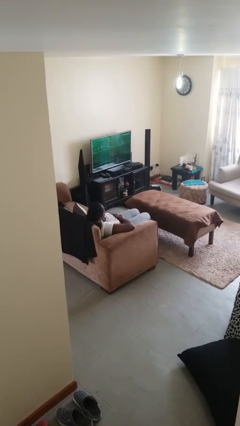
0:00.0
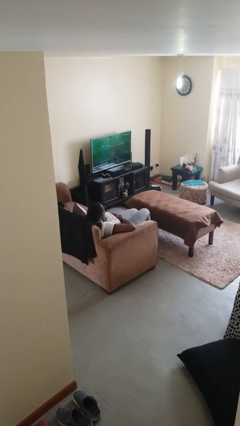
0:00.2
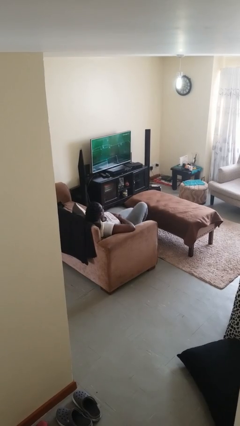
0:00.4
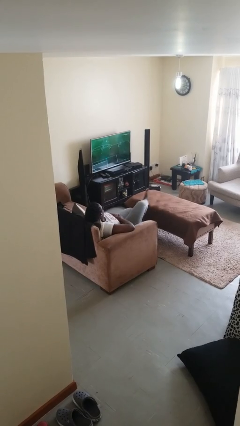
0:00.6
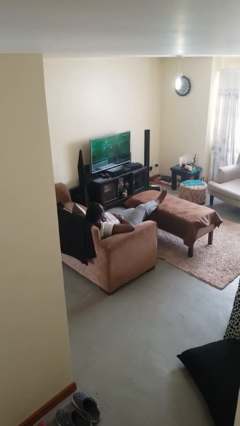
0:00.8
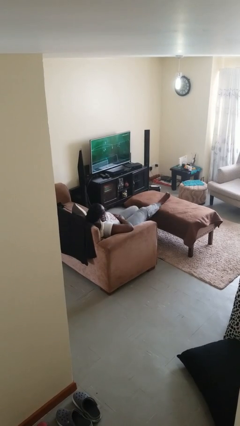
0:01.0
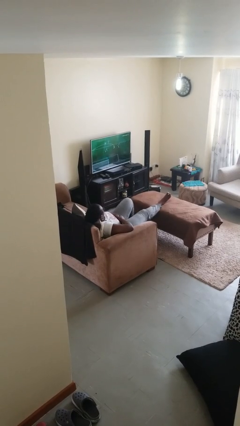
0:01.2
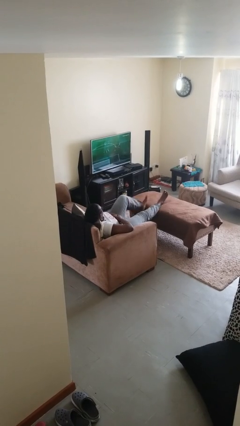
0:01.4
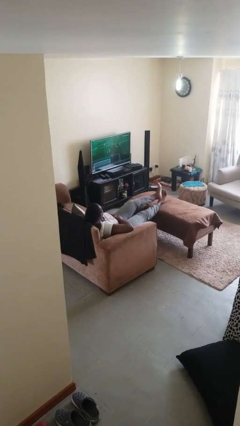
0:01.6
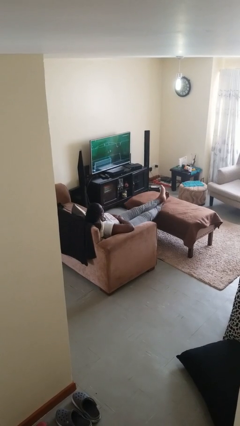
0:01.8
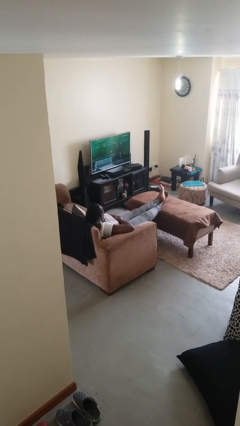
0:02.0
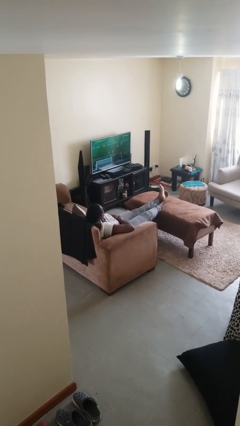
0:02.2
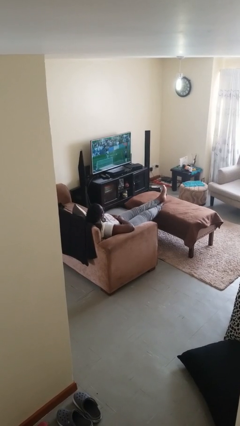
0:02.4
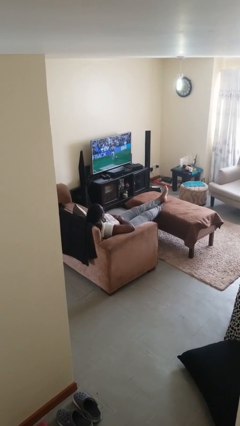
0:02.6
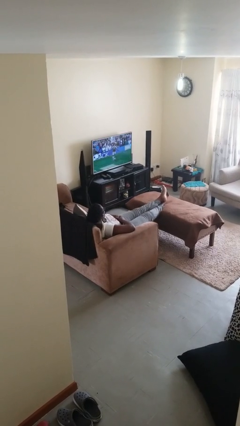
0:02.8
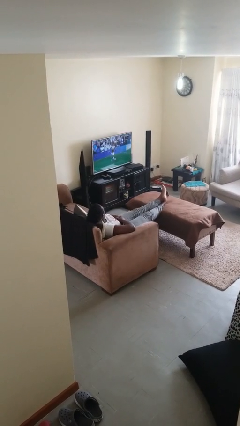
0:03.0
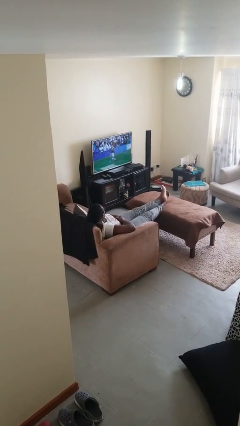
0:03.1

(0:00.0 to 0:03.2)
person puts feet up

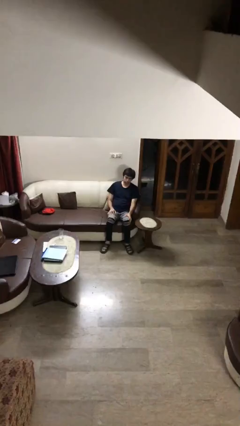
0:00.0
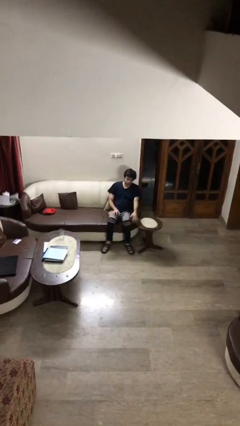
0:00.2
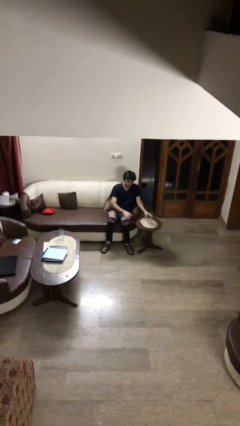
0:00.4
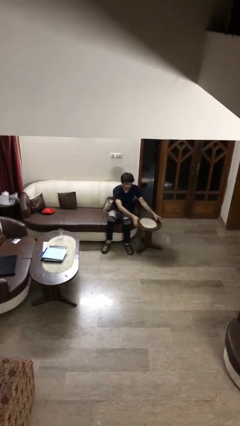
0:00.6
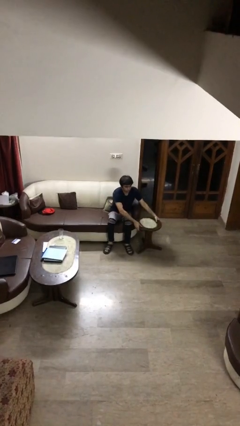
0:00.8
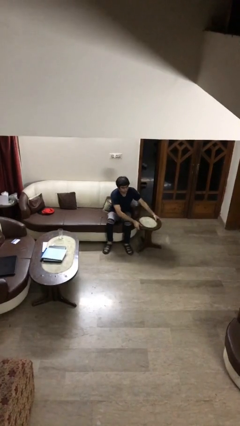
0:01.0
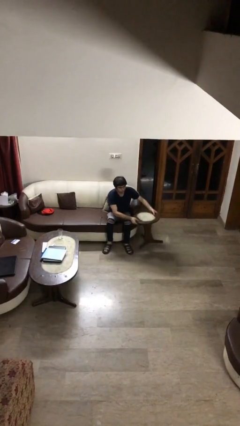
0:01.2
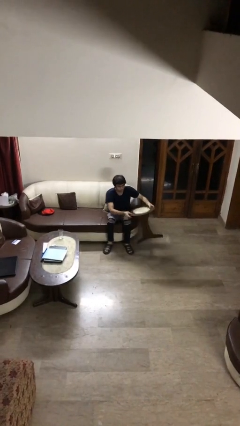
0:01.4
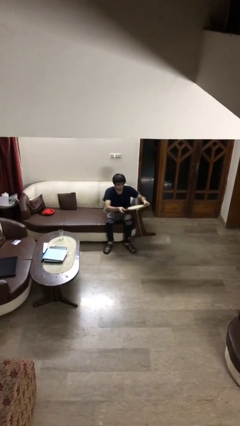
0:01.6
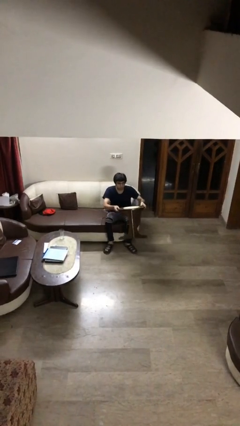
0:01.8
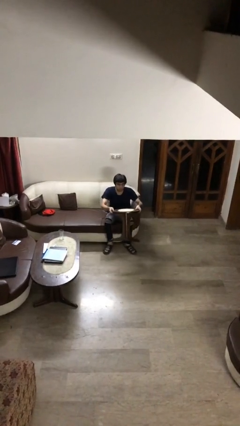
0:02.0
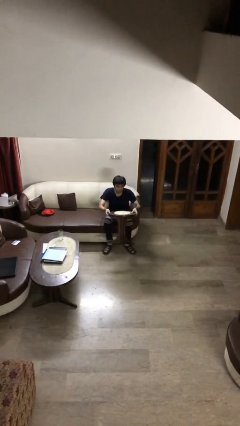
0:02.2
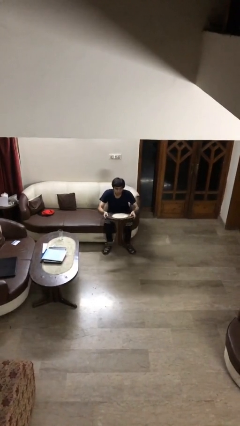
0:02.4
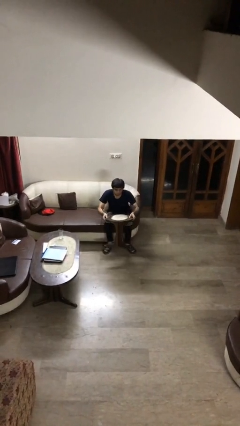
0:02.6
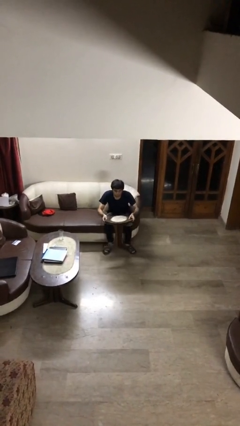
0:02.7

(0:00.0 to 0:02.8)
person picks up object from floor

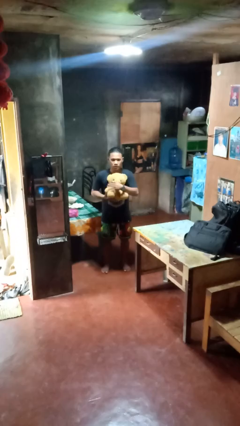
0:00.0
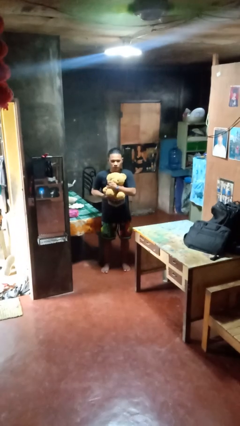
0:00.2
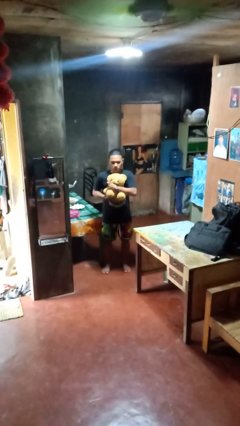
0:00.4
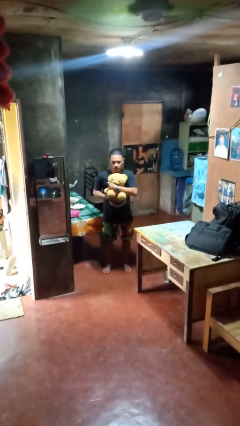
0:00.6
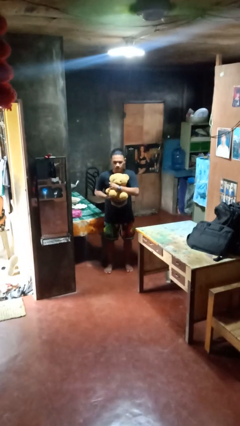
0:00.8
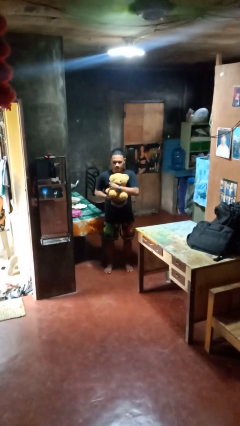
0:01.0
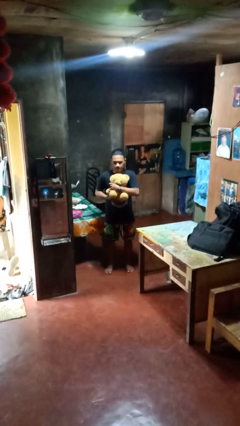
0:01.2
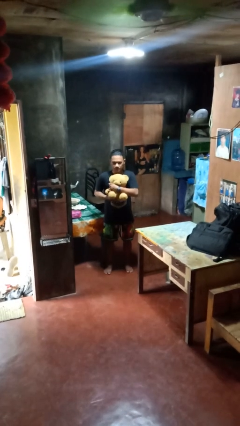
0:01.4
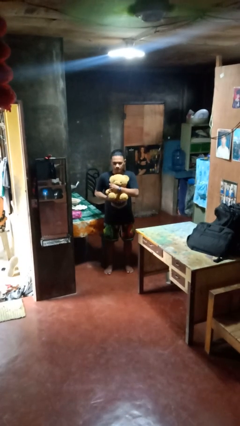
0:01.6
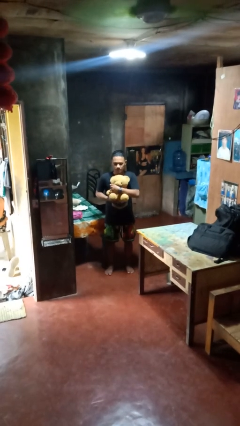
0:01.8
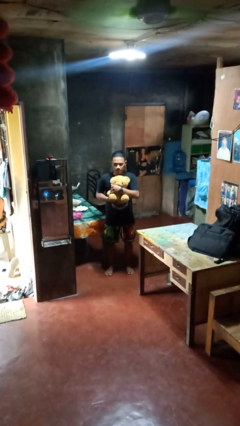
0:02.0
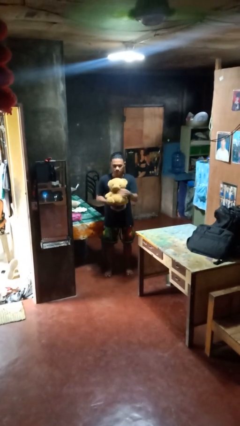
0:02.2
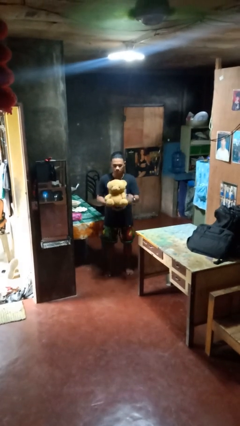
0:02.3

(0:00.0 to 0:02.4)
person hugs stuffed animal

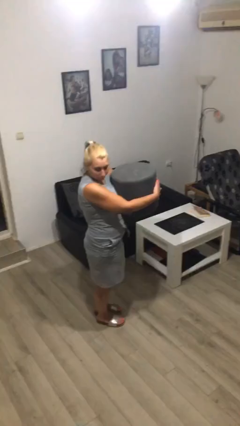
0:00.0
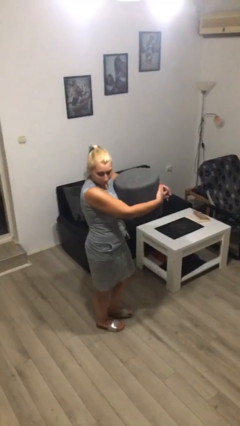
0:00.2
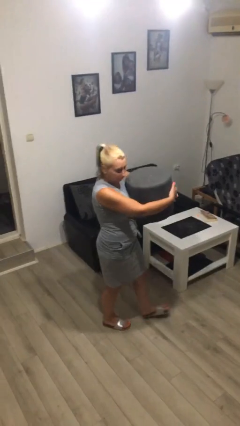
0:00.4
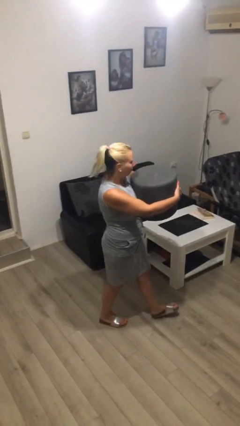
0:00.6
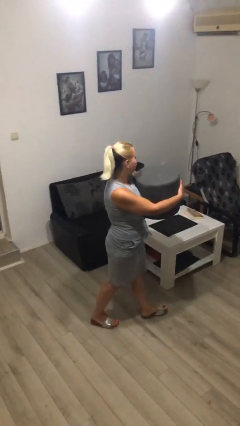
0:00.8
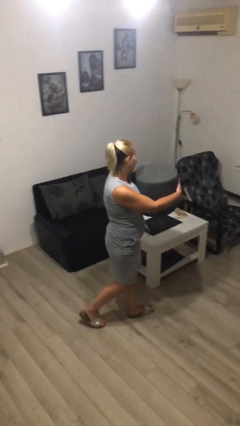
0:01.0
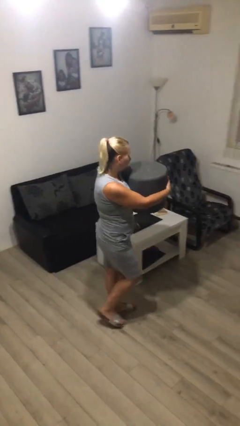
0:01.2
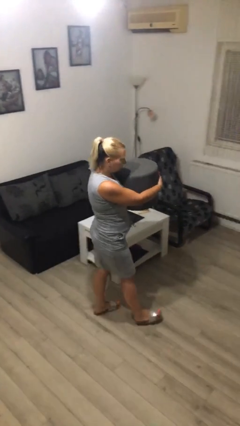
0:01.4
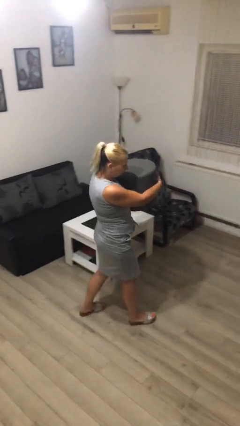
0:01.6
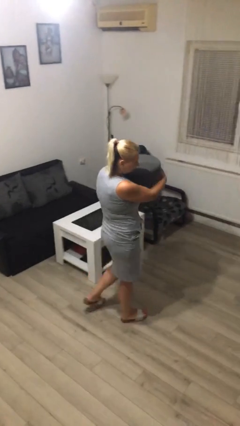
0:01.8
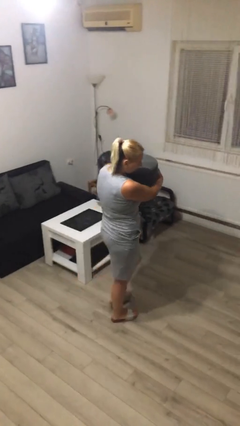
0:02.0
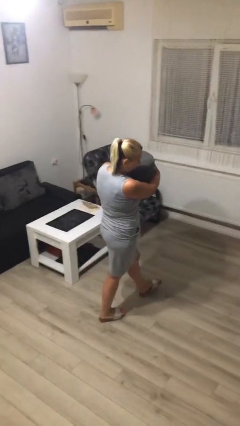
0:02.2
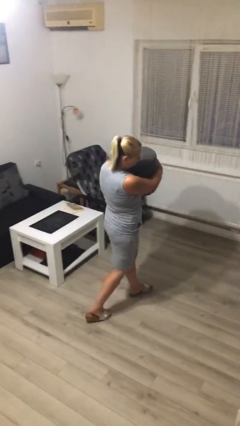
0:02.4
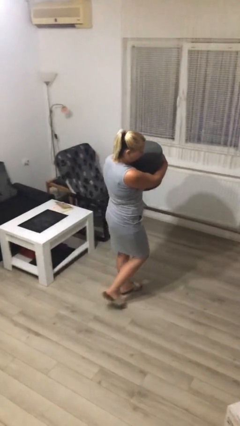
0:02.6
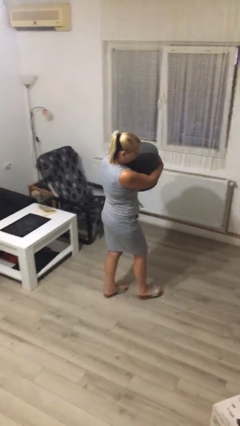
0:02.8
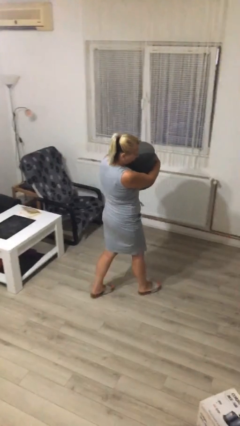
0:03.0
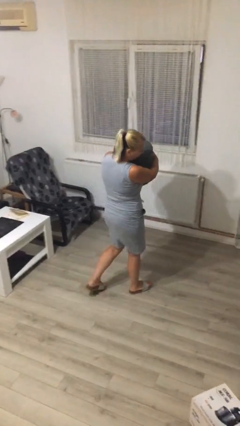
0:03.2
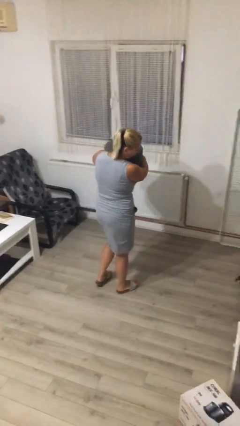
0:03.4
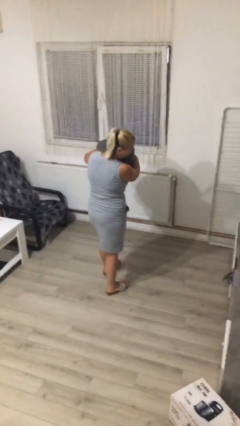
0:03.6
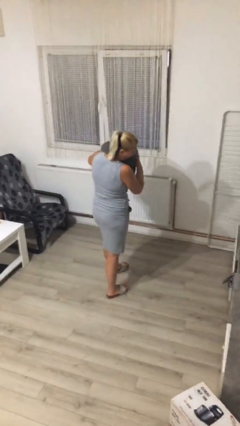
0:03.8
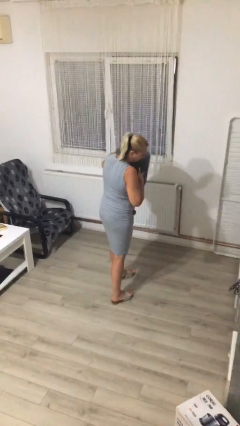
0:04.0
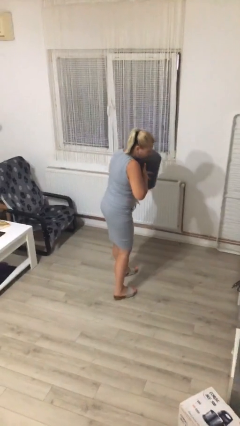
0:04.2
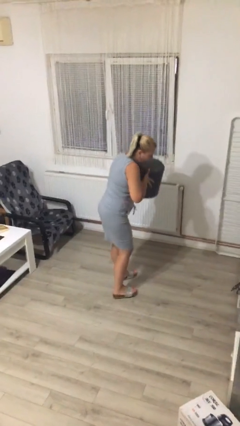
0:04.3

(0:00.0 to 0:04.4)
person carries heavy object

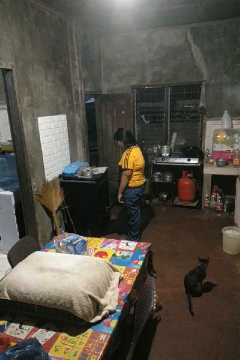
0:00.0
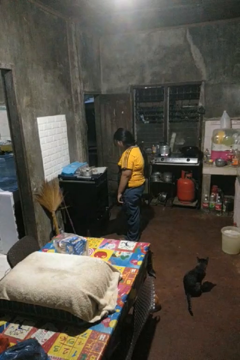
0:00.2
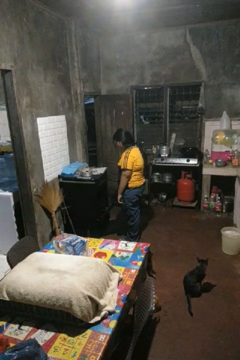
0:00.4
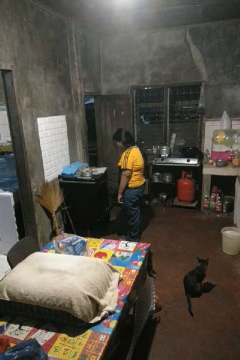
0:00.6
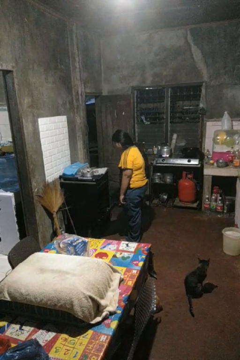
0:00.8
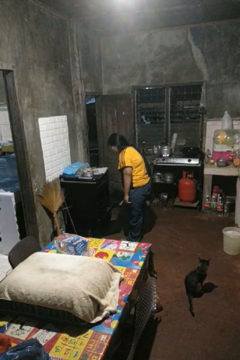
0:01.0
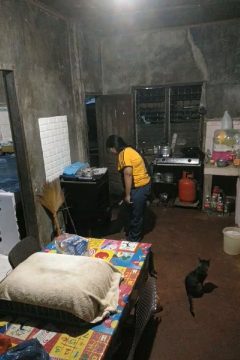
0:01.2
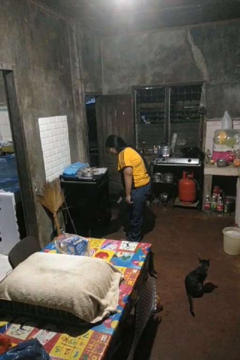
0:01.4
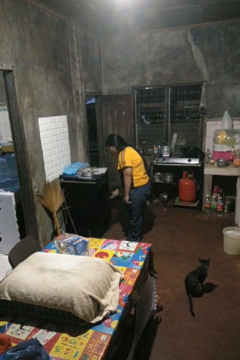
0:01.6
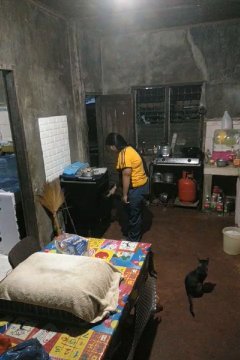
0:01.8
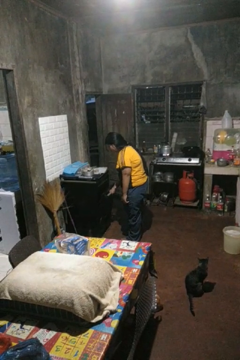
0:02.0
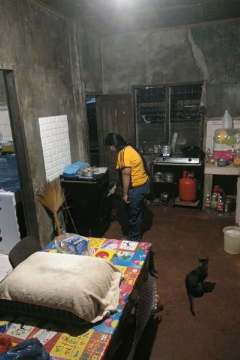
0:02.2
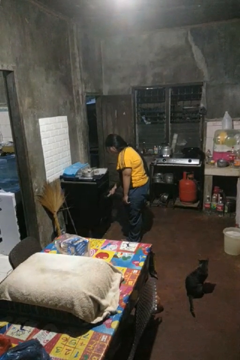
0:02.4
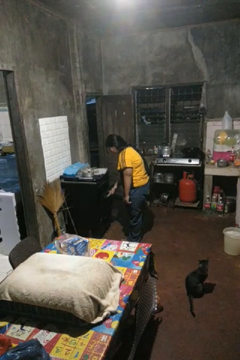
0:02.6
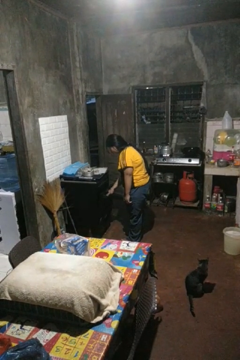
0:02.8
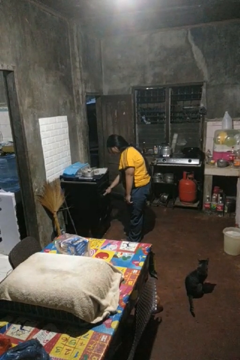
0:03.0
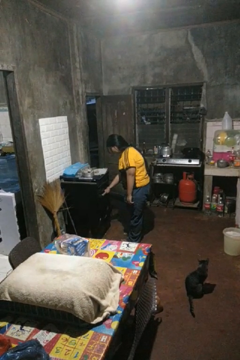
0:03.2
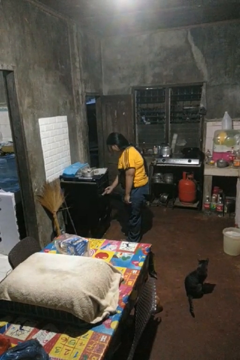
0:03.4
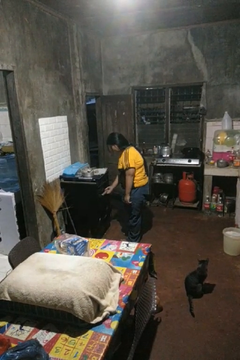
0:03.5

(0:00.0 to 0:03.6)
person closes oven door

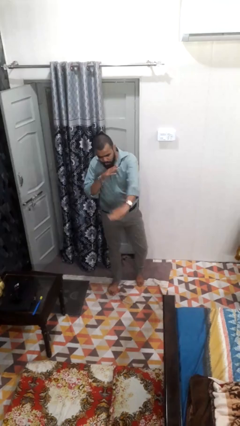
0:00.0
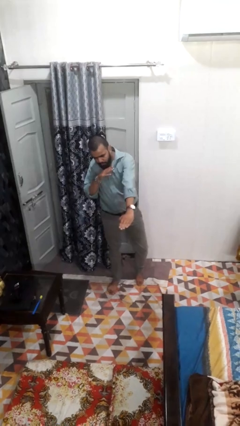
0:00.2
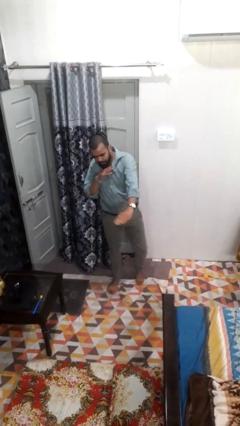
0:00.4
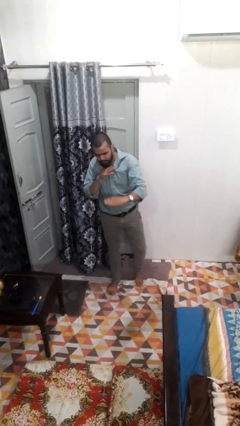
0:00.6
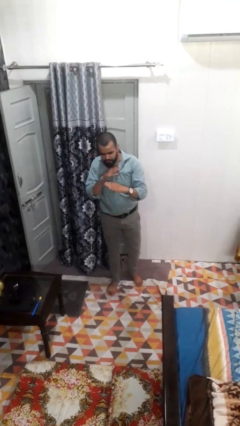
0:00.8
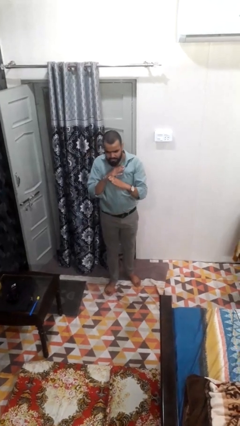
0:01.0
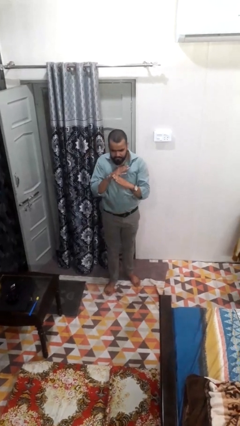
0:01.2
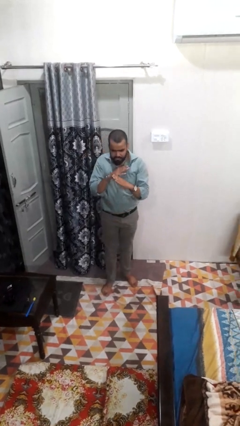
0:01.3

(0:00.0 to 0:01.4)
person karate chop
